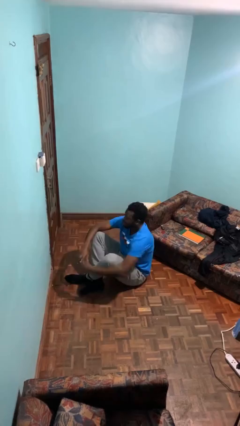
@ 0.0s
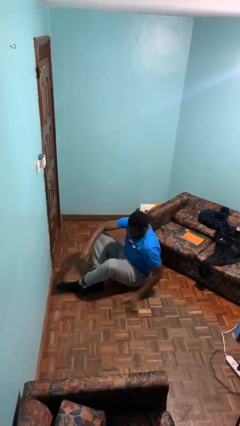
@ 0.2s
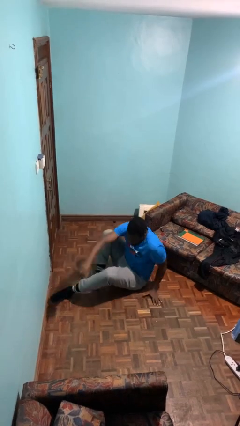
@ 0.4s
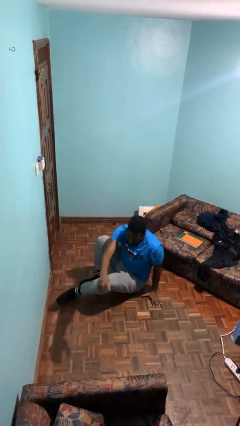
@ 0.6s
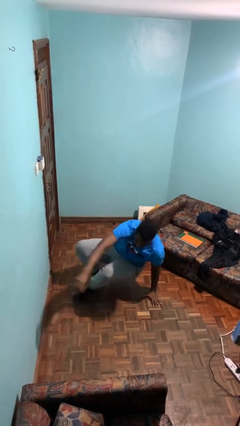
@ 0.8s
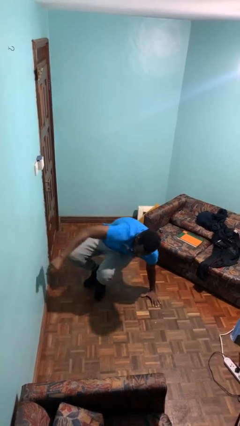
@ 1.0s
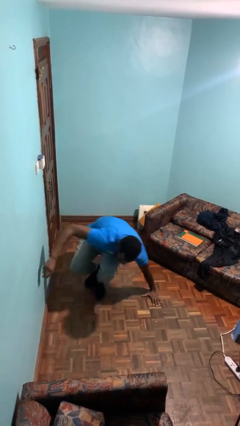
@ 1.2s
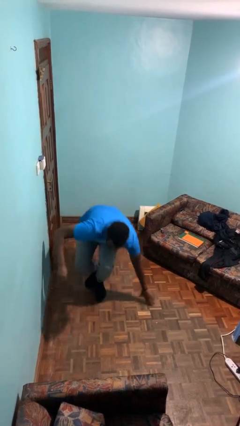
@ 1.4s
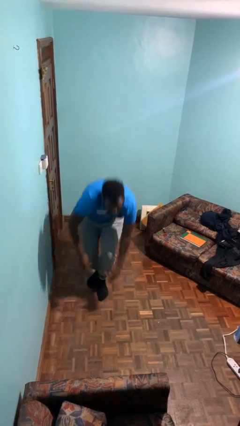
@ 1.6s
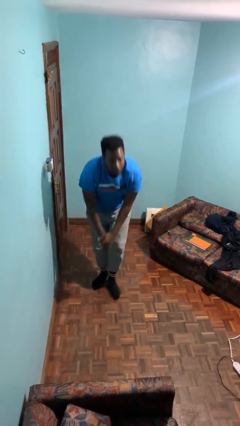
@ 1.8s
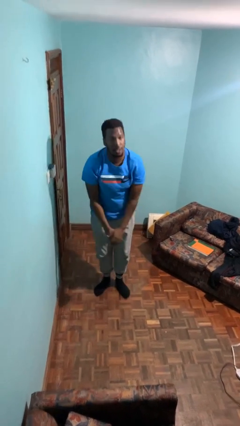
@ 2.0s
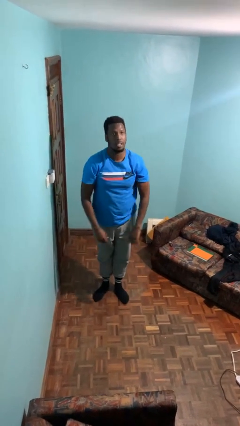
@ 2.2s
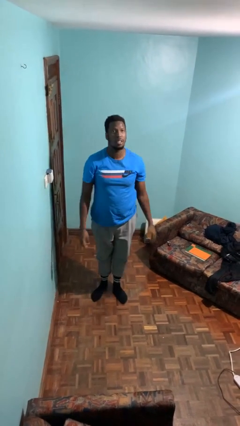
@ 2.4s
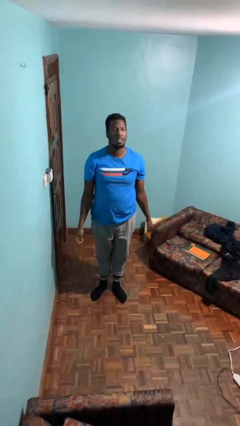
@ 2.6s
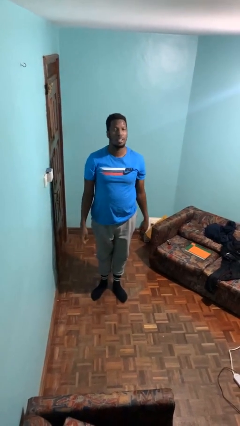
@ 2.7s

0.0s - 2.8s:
person stands up from floor

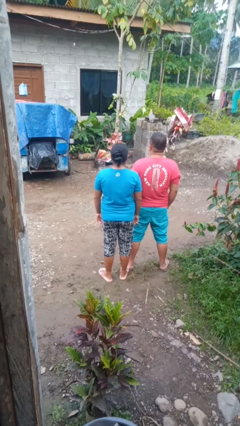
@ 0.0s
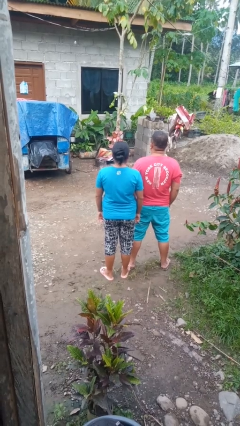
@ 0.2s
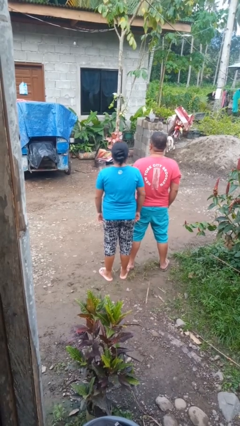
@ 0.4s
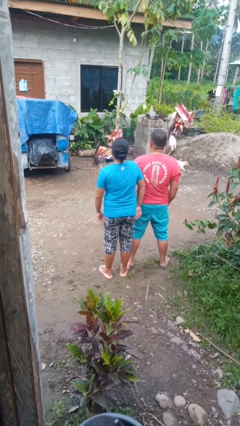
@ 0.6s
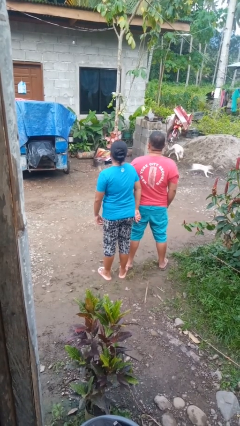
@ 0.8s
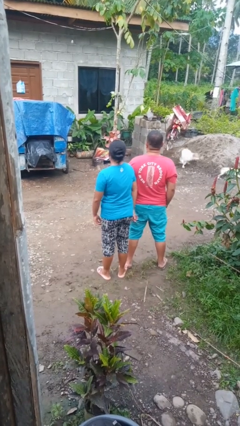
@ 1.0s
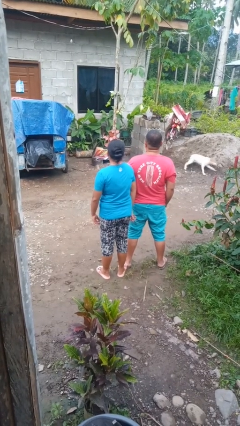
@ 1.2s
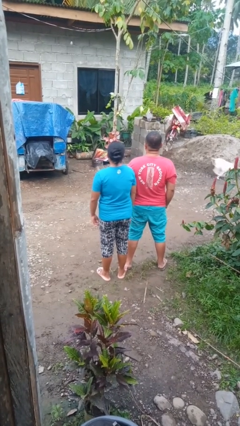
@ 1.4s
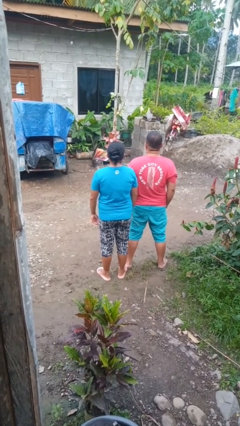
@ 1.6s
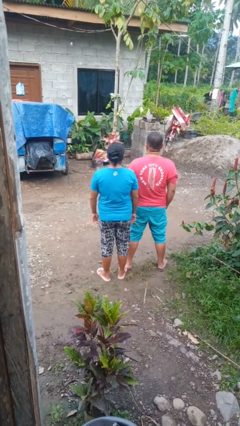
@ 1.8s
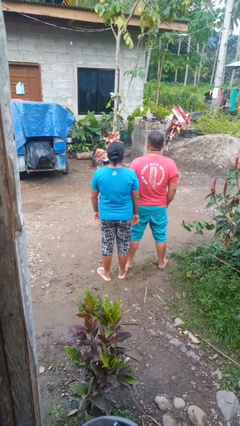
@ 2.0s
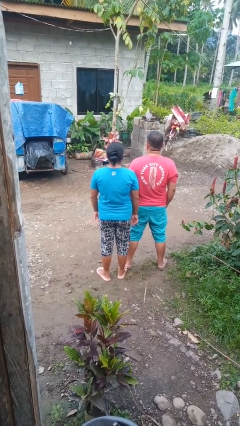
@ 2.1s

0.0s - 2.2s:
person nudges person with elbow

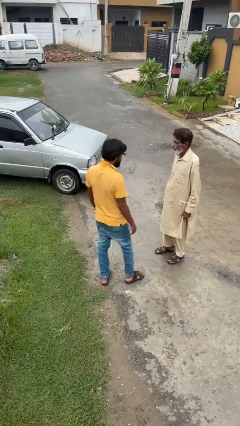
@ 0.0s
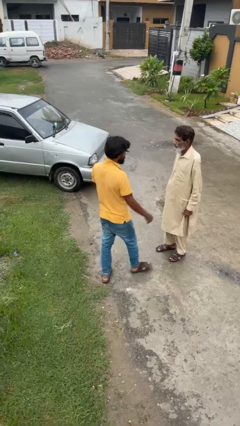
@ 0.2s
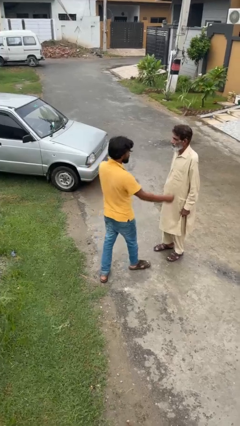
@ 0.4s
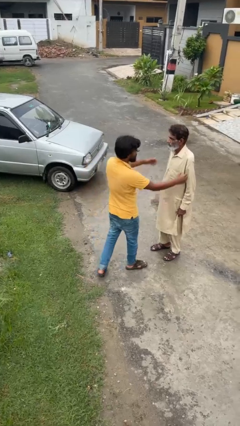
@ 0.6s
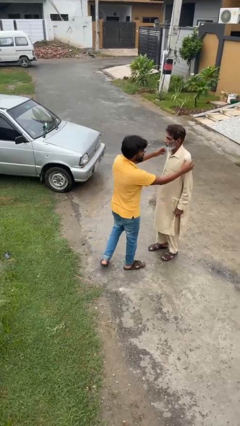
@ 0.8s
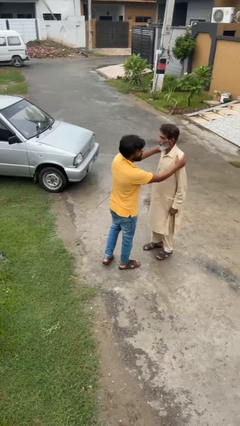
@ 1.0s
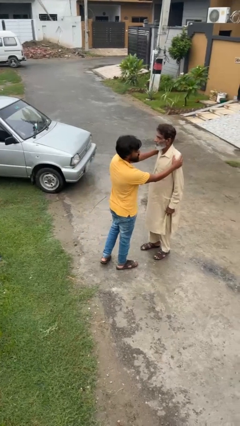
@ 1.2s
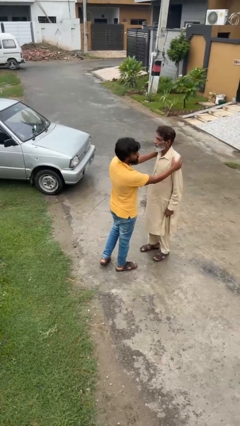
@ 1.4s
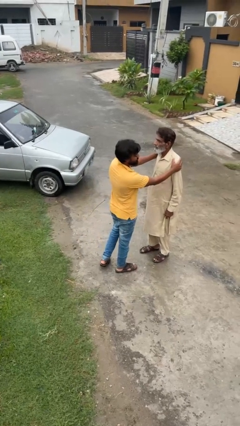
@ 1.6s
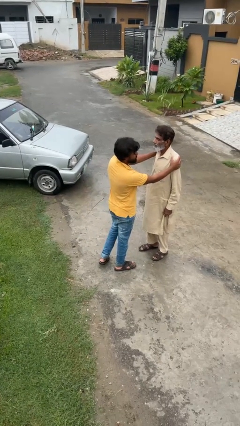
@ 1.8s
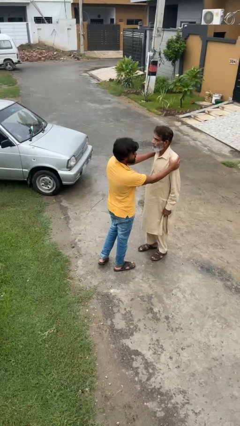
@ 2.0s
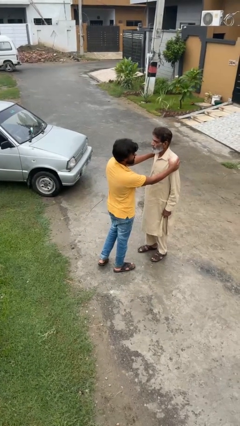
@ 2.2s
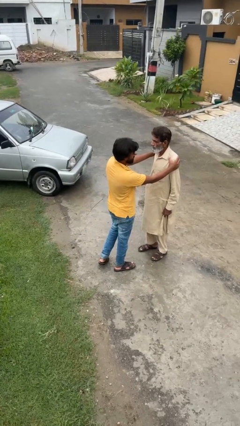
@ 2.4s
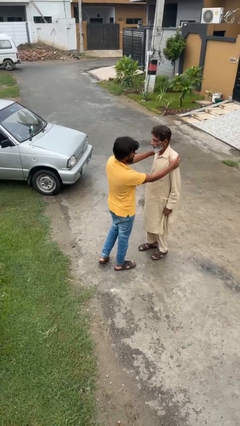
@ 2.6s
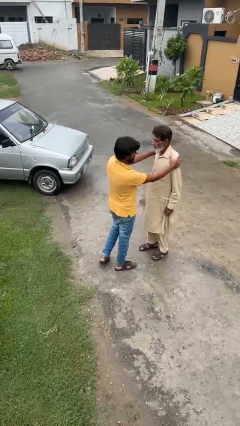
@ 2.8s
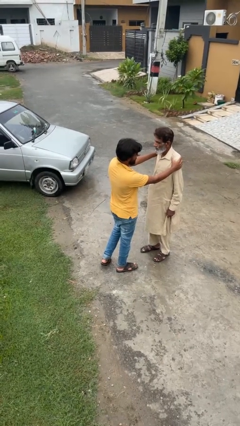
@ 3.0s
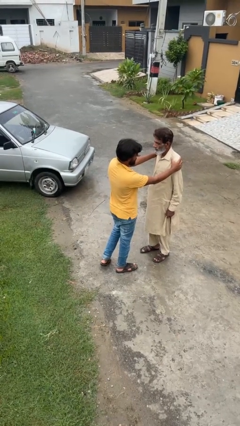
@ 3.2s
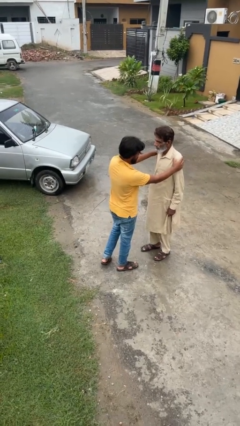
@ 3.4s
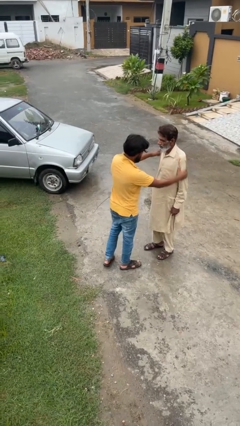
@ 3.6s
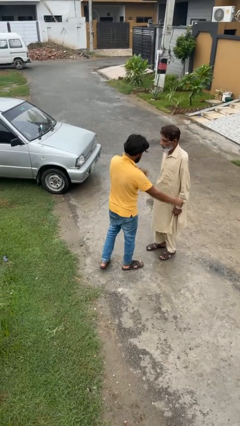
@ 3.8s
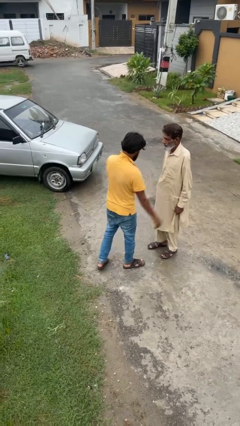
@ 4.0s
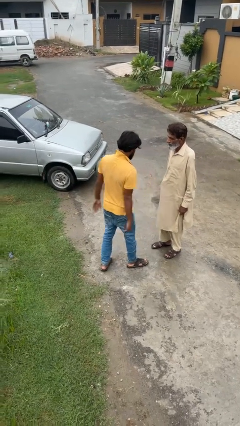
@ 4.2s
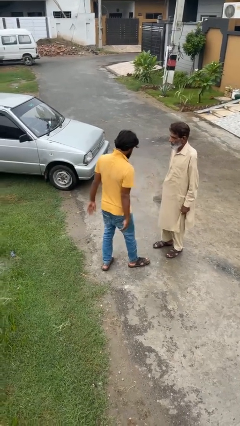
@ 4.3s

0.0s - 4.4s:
person pounds shoulders of person

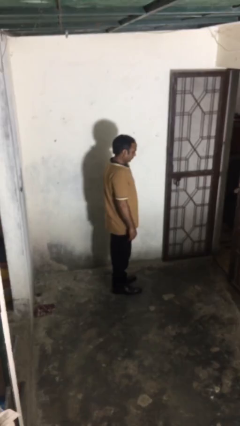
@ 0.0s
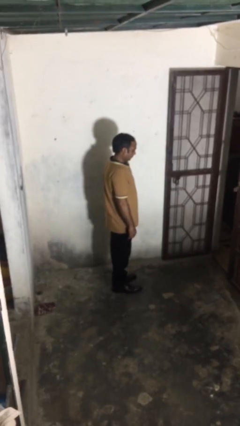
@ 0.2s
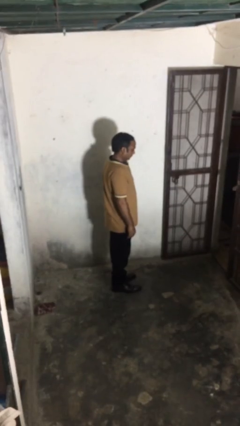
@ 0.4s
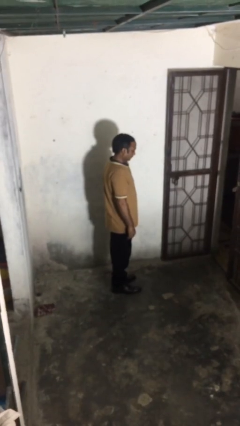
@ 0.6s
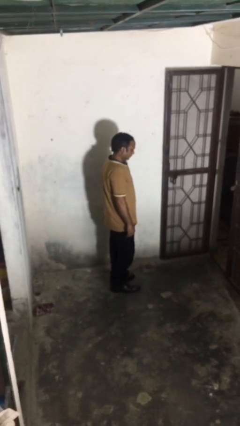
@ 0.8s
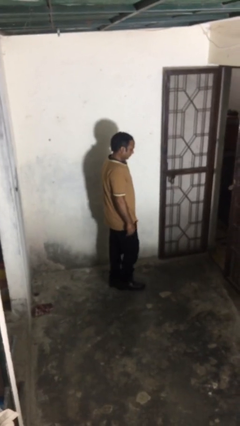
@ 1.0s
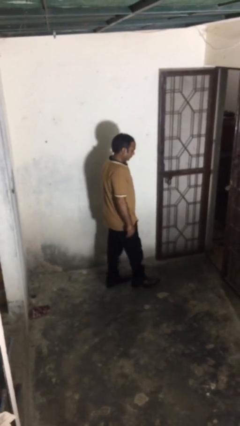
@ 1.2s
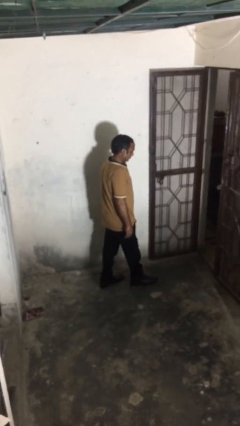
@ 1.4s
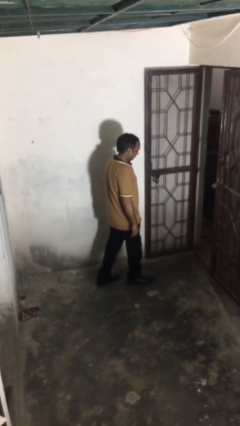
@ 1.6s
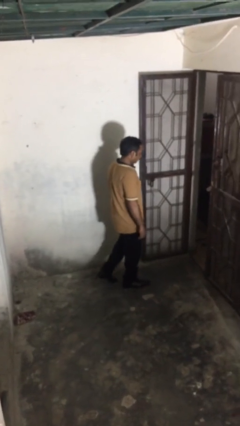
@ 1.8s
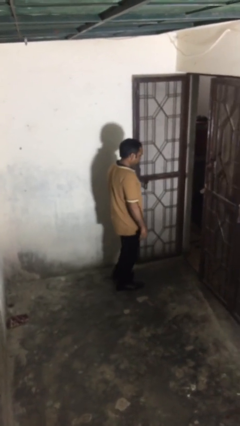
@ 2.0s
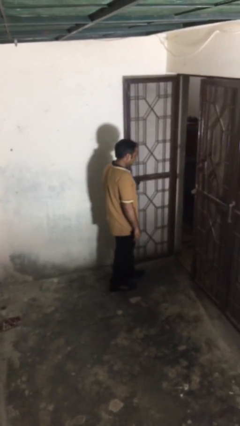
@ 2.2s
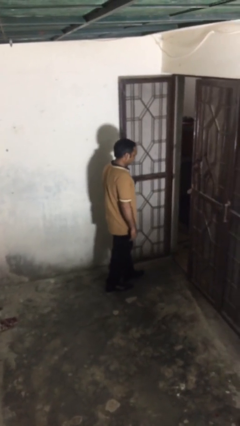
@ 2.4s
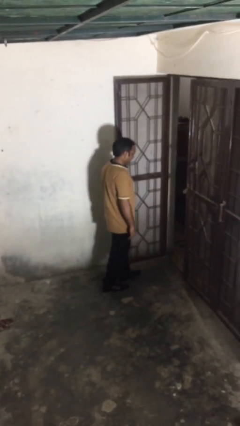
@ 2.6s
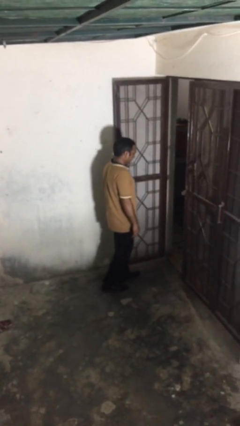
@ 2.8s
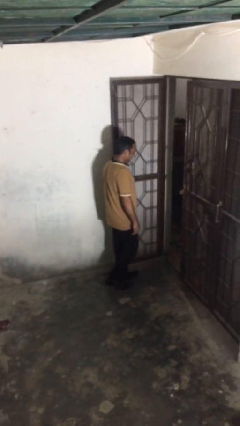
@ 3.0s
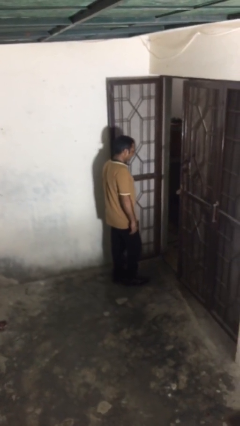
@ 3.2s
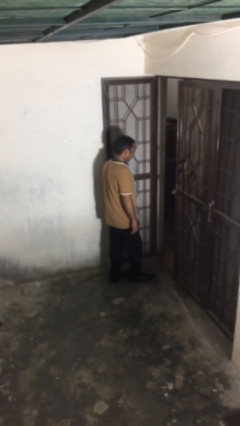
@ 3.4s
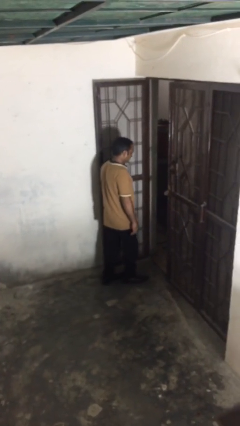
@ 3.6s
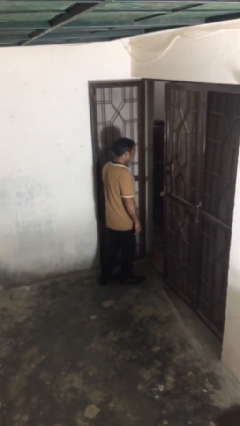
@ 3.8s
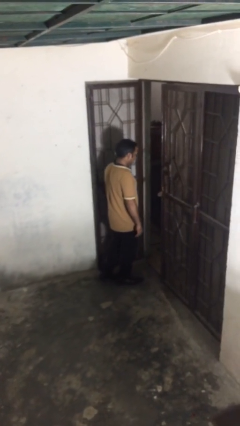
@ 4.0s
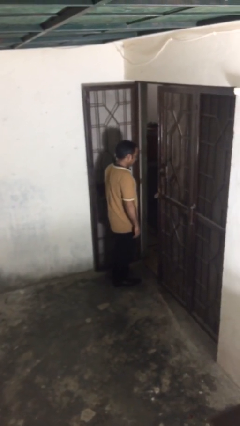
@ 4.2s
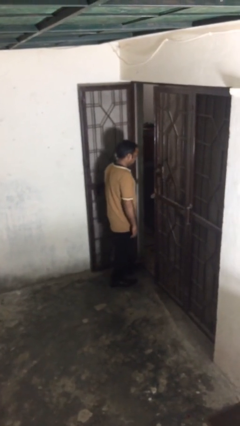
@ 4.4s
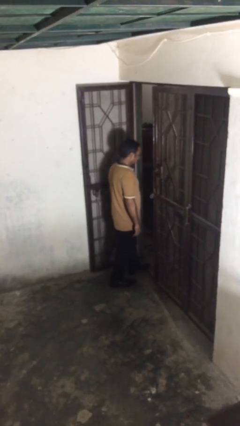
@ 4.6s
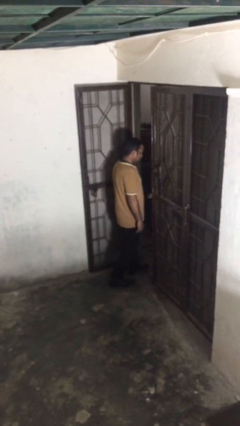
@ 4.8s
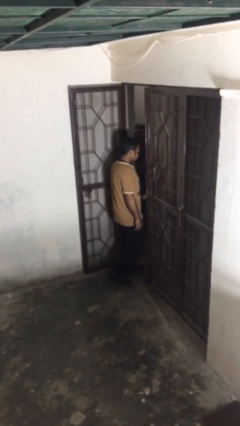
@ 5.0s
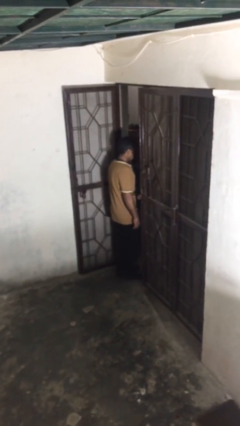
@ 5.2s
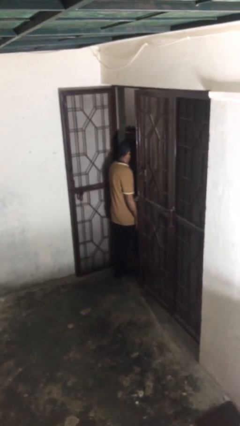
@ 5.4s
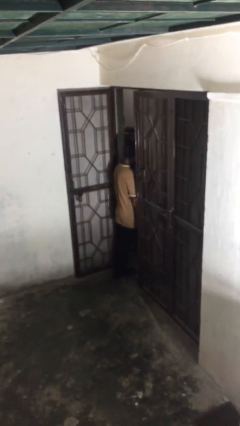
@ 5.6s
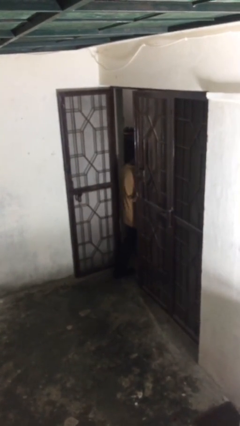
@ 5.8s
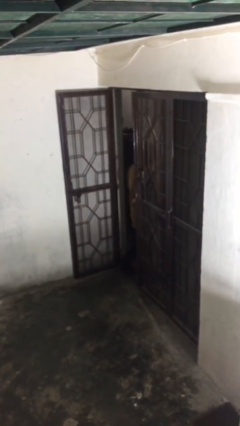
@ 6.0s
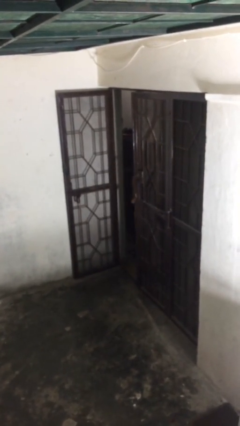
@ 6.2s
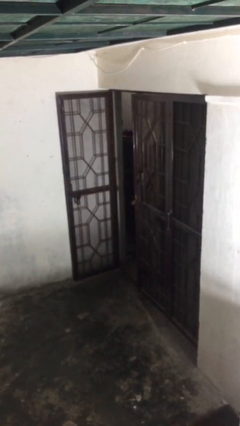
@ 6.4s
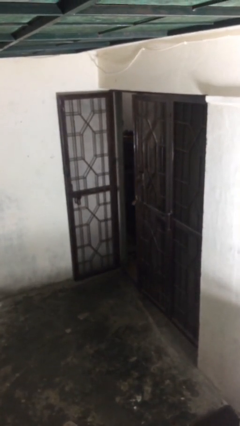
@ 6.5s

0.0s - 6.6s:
person exits scene through structure

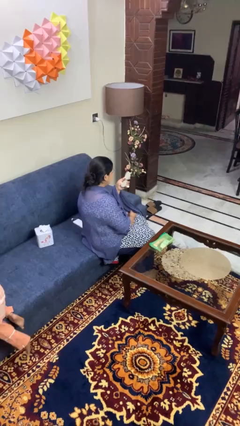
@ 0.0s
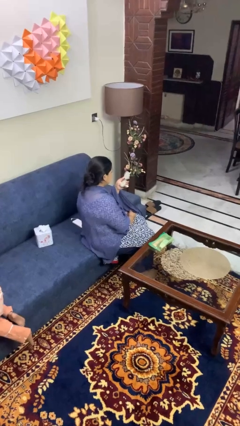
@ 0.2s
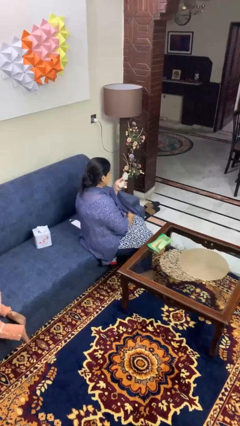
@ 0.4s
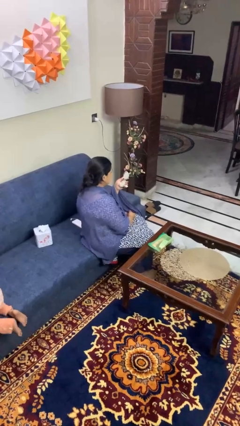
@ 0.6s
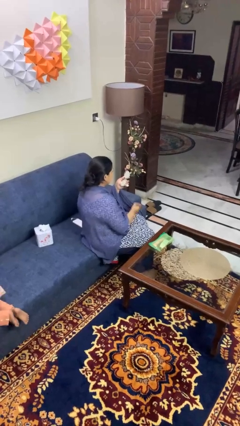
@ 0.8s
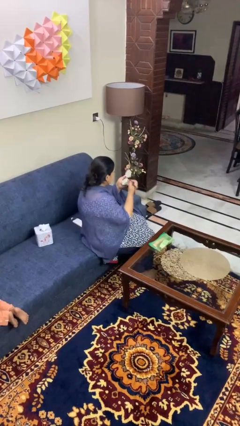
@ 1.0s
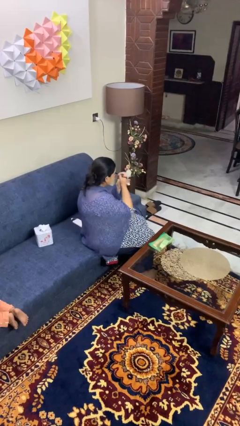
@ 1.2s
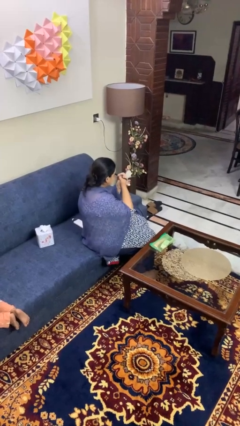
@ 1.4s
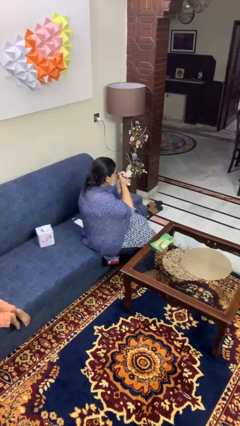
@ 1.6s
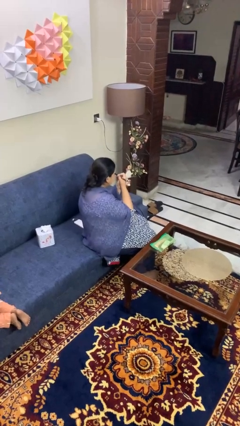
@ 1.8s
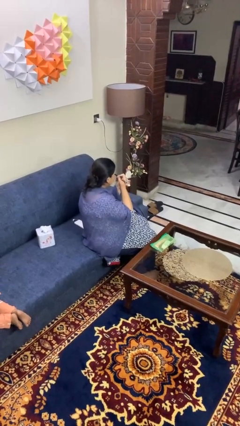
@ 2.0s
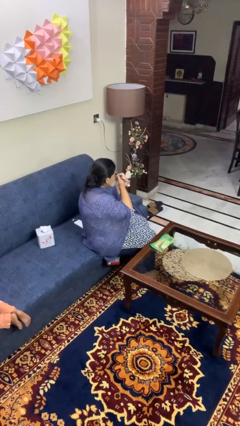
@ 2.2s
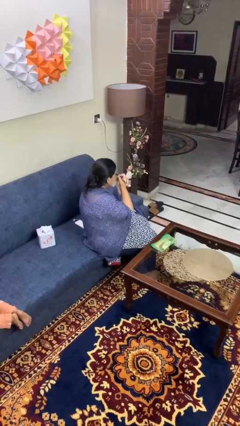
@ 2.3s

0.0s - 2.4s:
person applies eye makeup
